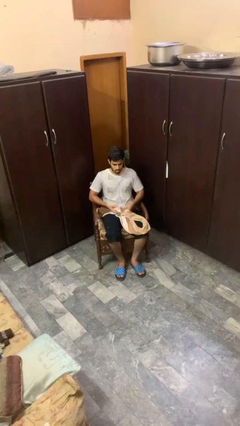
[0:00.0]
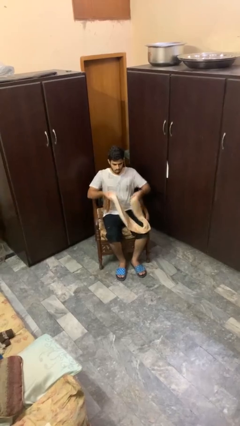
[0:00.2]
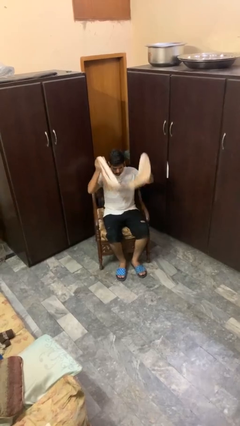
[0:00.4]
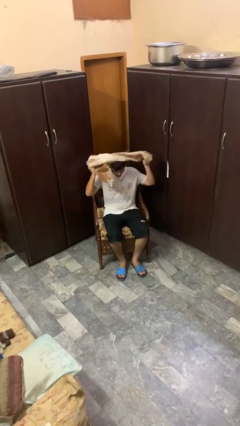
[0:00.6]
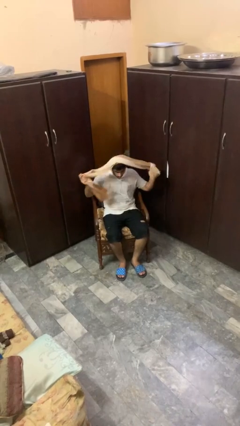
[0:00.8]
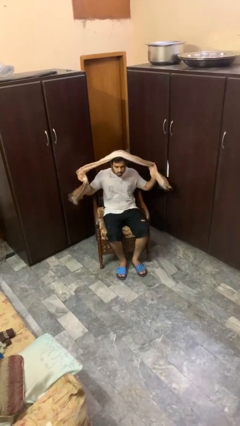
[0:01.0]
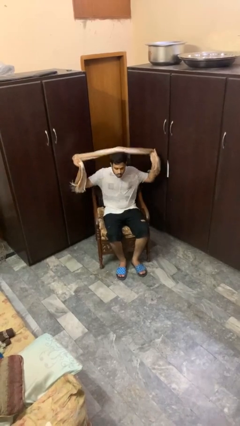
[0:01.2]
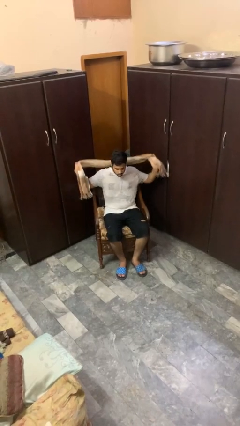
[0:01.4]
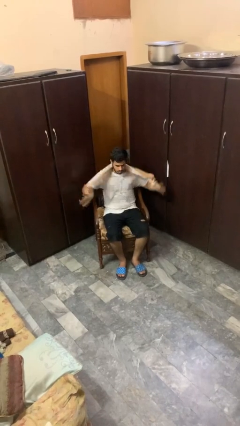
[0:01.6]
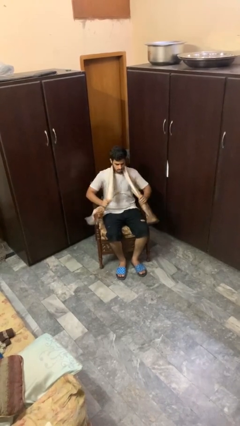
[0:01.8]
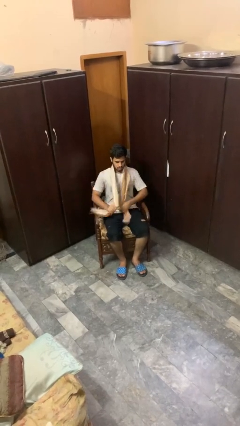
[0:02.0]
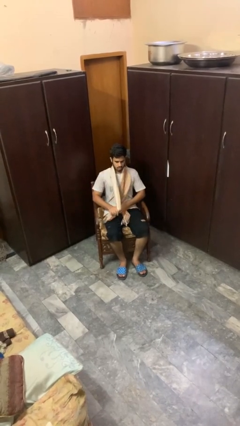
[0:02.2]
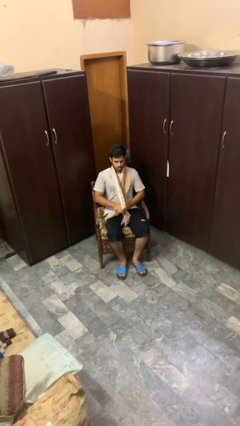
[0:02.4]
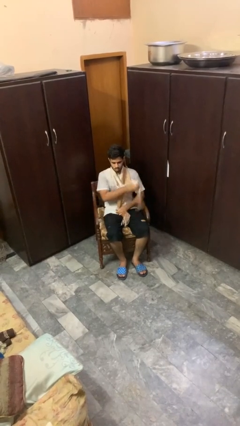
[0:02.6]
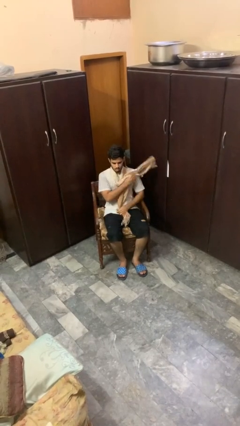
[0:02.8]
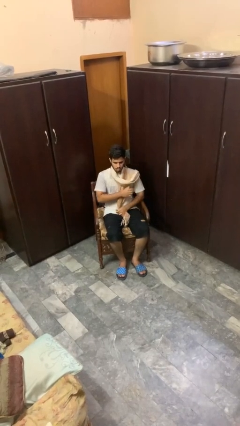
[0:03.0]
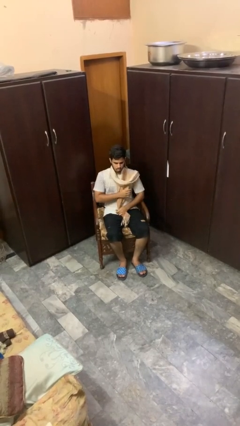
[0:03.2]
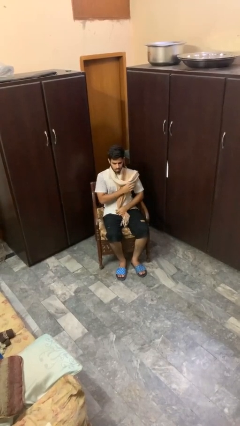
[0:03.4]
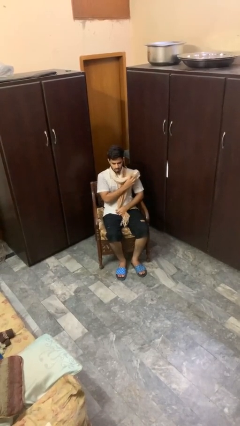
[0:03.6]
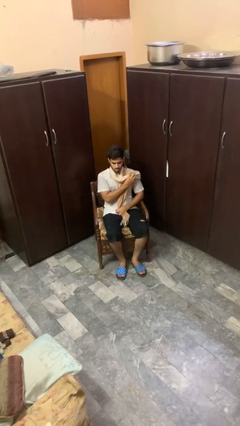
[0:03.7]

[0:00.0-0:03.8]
person puts on scarf

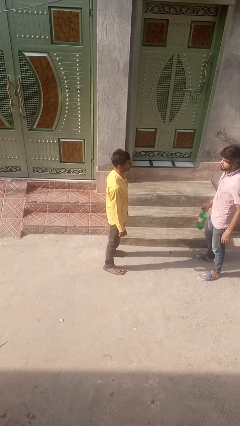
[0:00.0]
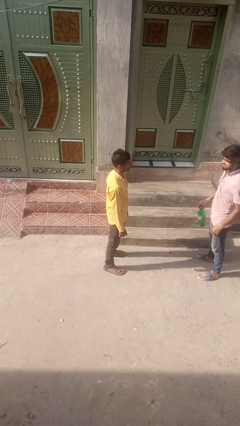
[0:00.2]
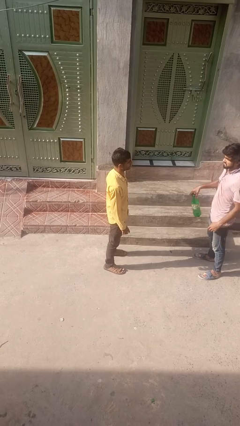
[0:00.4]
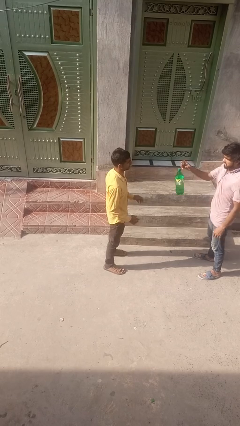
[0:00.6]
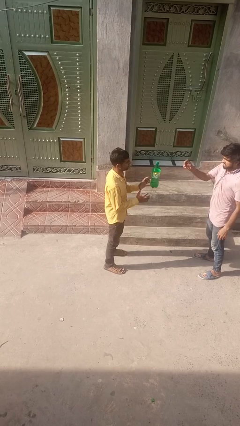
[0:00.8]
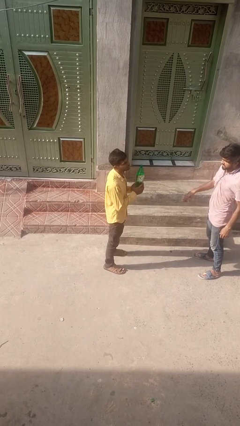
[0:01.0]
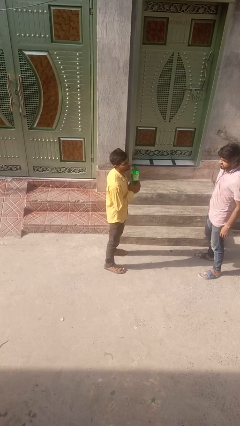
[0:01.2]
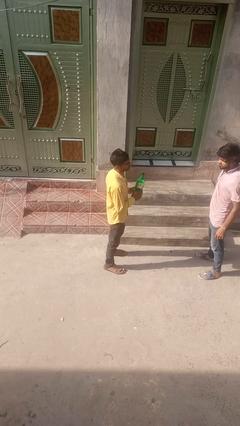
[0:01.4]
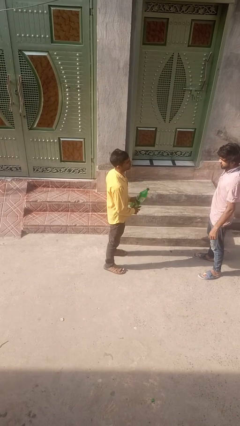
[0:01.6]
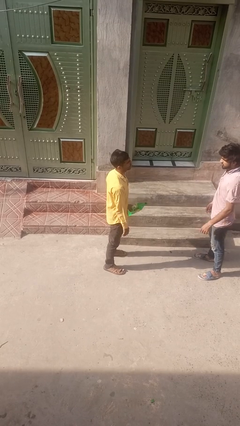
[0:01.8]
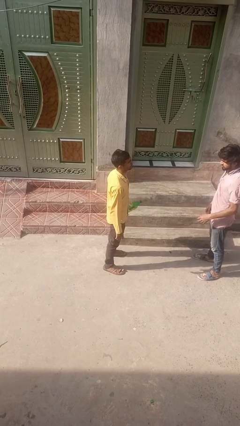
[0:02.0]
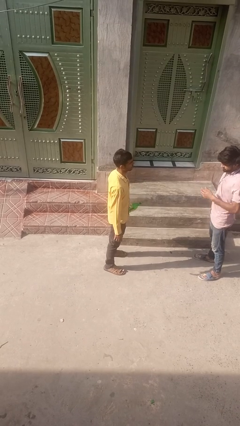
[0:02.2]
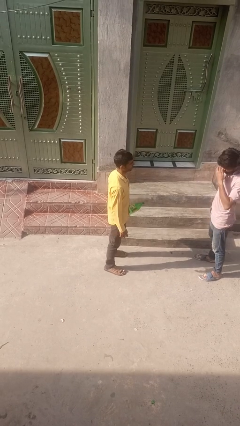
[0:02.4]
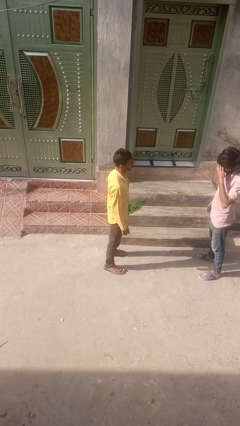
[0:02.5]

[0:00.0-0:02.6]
person catches object from person

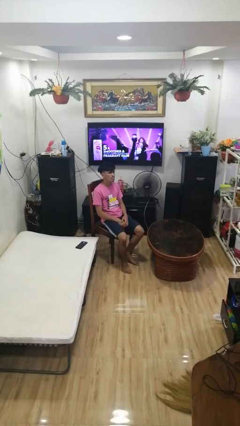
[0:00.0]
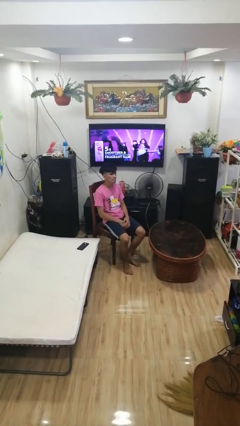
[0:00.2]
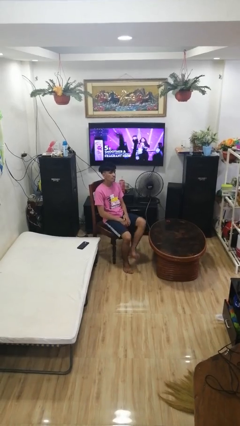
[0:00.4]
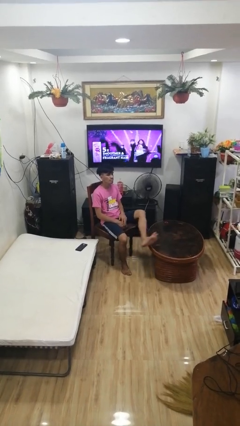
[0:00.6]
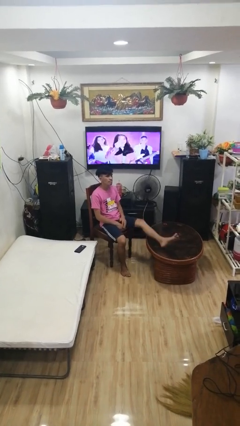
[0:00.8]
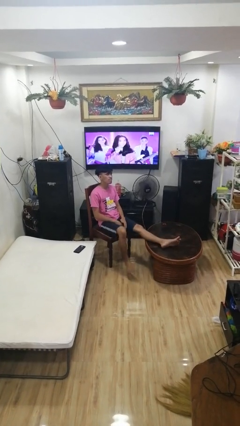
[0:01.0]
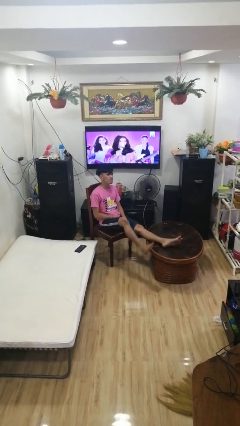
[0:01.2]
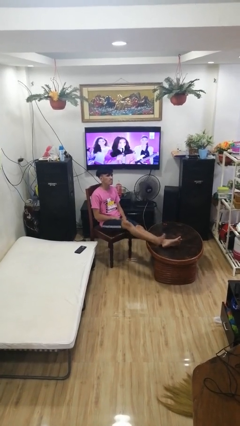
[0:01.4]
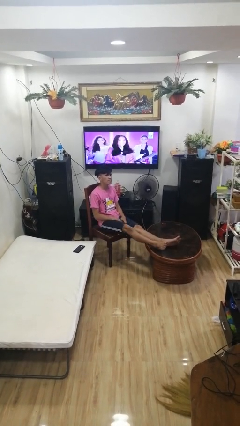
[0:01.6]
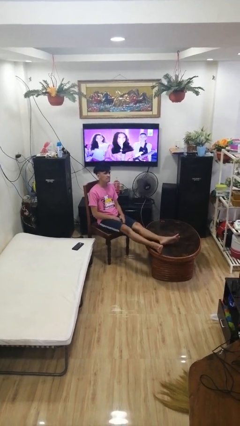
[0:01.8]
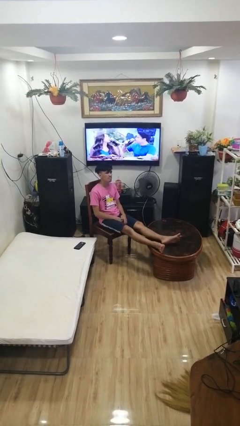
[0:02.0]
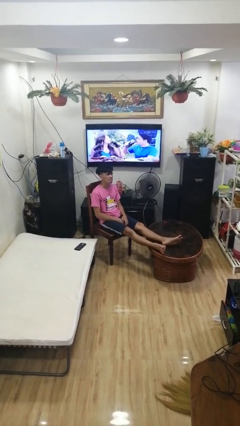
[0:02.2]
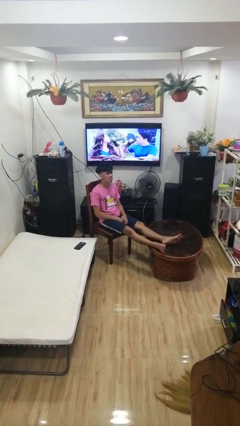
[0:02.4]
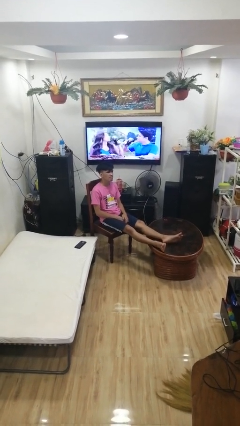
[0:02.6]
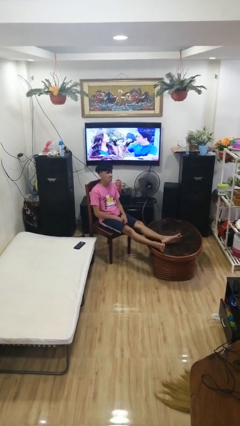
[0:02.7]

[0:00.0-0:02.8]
person puts feet up

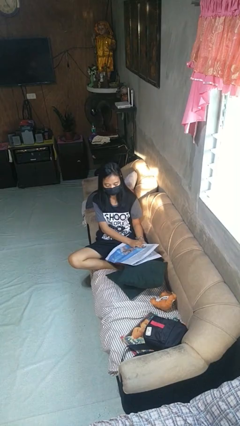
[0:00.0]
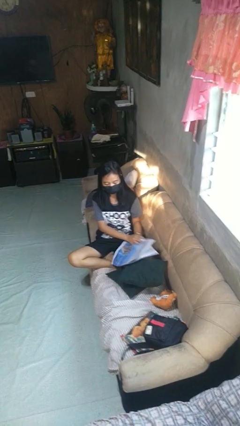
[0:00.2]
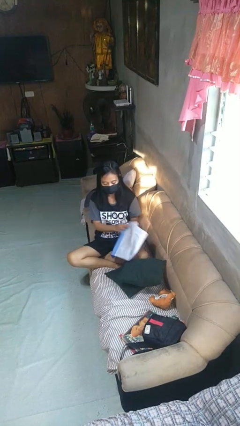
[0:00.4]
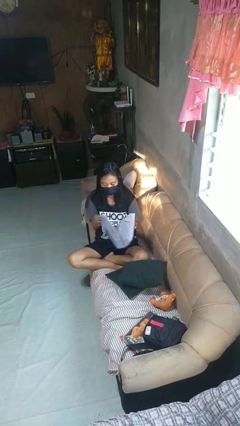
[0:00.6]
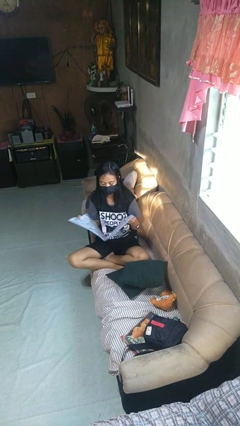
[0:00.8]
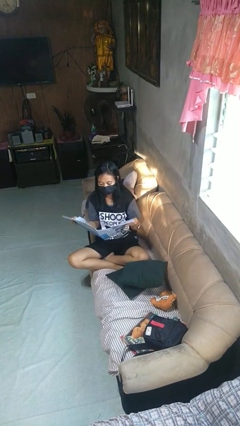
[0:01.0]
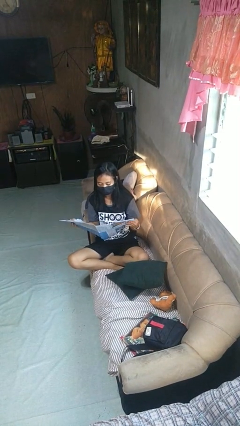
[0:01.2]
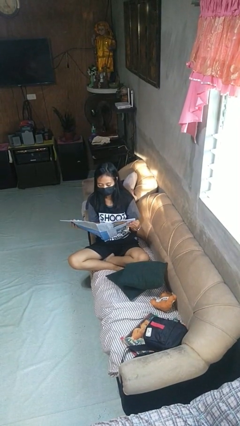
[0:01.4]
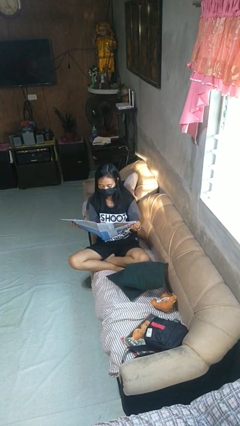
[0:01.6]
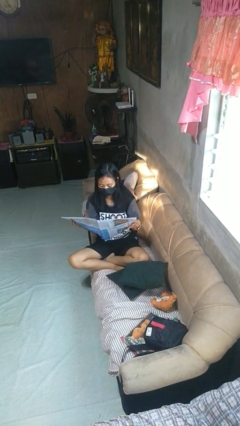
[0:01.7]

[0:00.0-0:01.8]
person reads newspaper

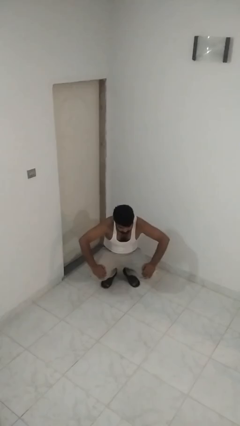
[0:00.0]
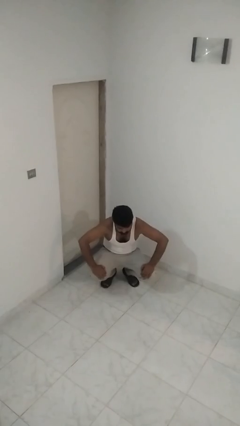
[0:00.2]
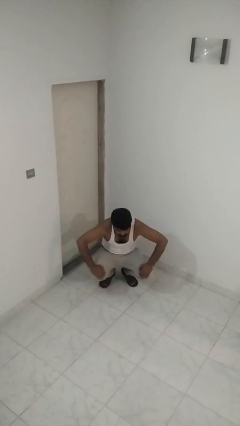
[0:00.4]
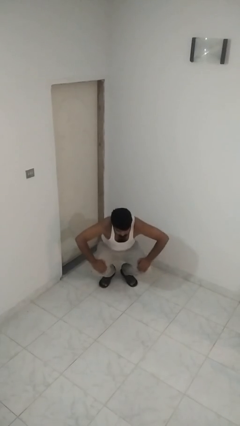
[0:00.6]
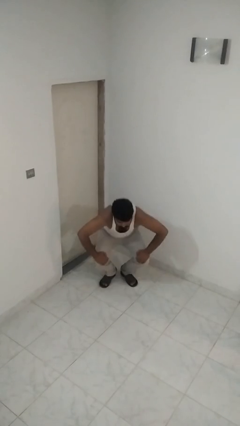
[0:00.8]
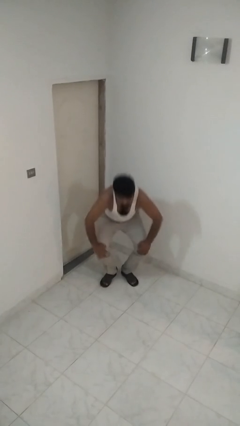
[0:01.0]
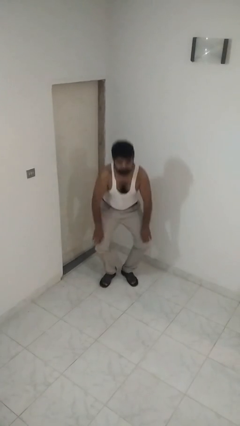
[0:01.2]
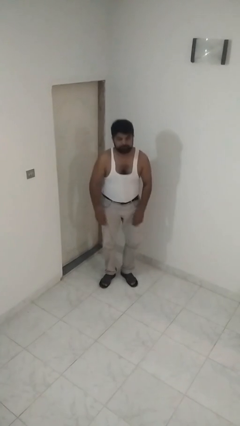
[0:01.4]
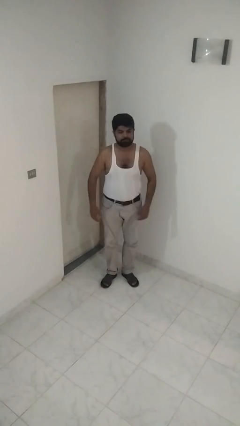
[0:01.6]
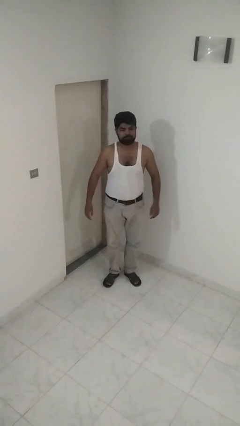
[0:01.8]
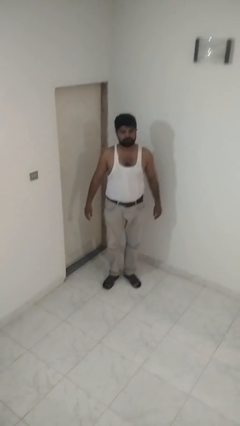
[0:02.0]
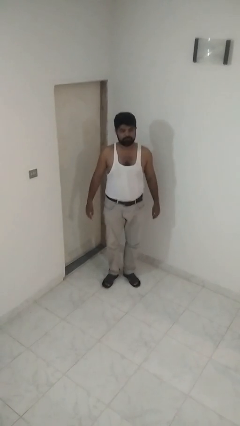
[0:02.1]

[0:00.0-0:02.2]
person stands up

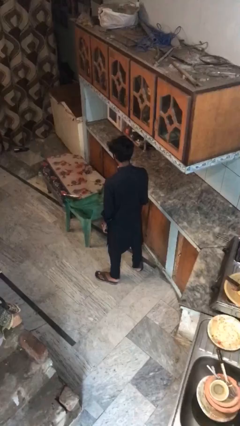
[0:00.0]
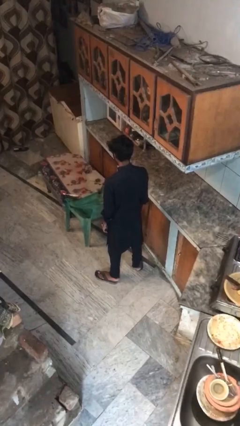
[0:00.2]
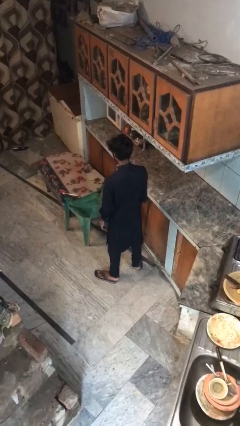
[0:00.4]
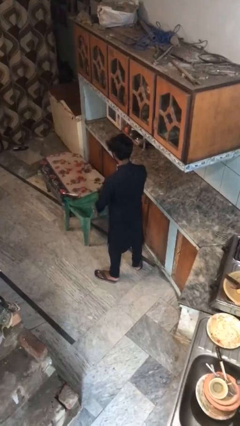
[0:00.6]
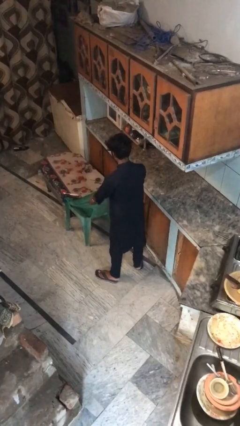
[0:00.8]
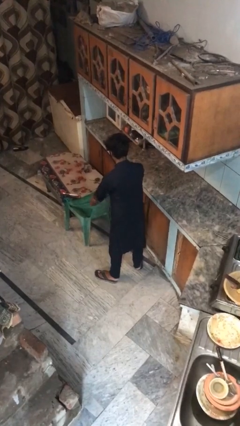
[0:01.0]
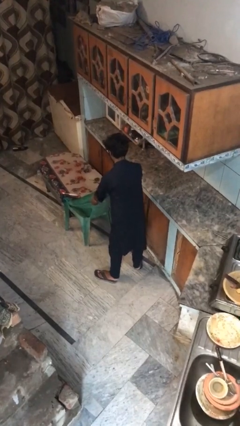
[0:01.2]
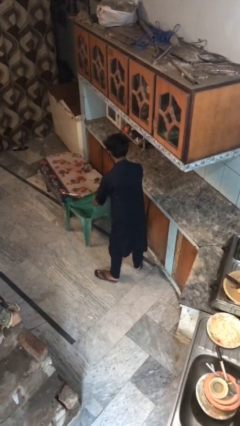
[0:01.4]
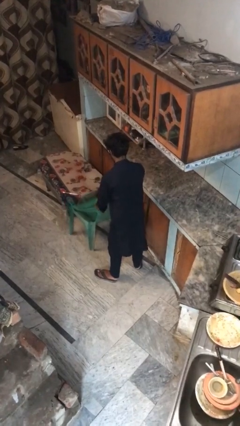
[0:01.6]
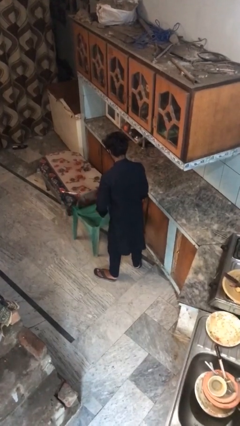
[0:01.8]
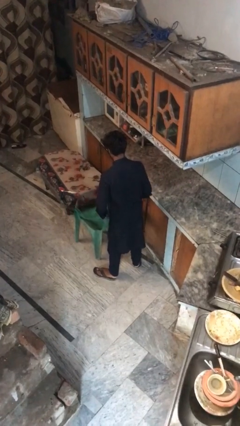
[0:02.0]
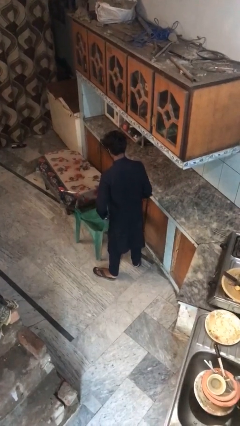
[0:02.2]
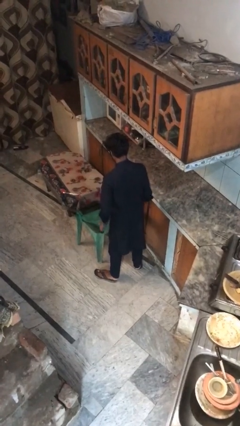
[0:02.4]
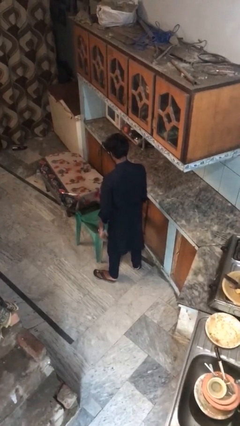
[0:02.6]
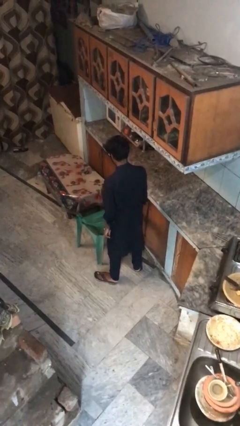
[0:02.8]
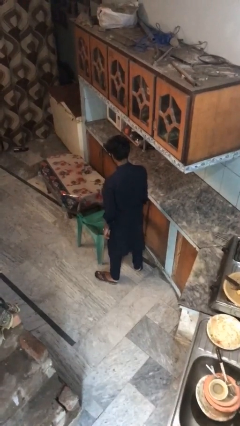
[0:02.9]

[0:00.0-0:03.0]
person pulls out chair

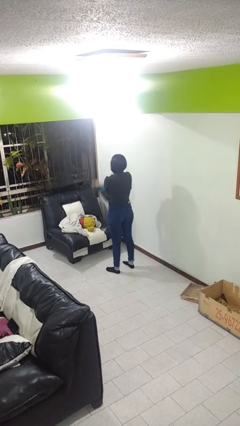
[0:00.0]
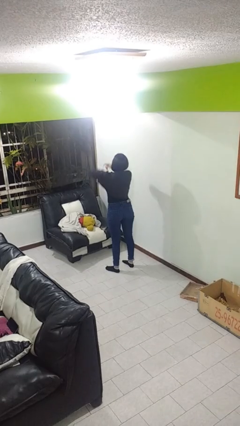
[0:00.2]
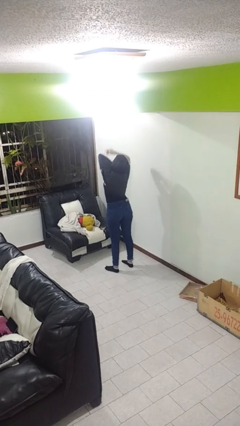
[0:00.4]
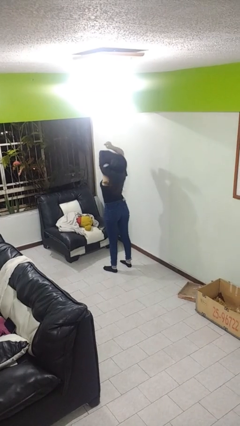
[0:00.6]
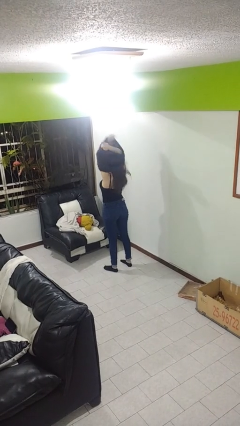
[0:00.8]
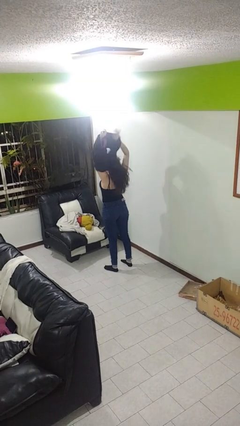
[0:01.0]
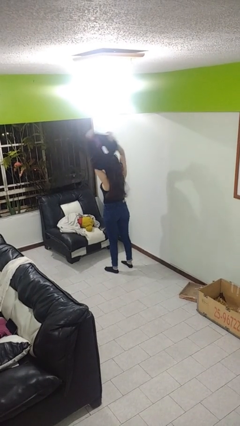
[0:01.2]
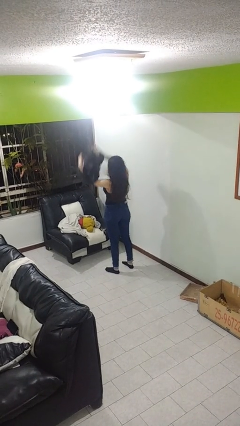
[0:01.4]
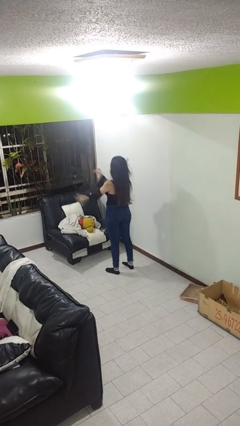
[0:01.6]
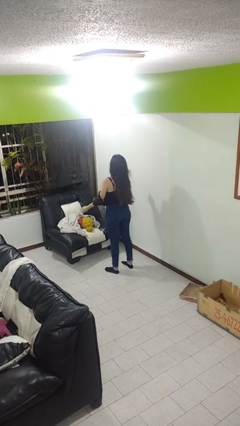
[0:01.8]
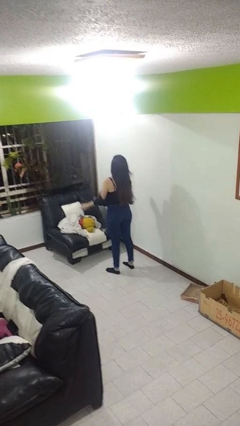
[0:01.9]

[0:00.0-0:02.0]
person takes off shirt
